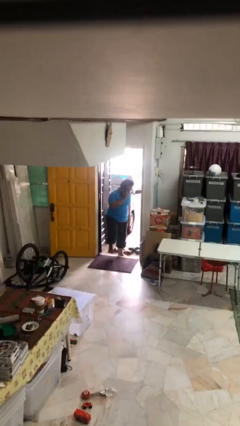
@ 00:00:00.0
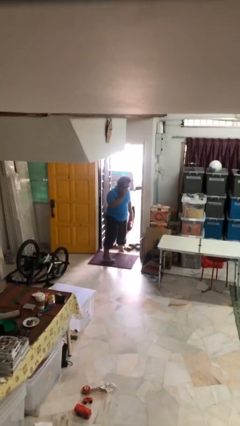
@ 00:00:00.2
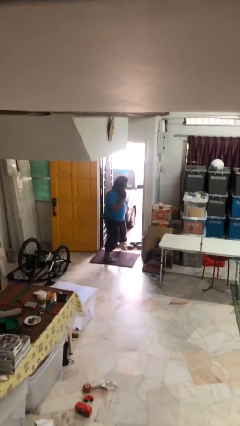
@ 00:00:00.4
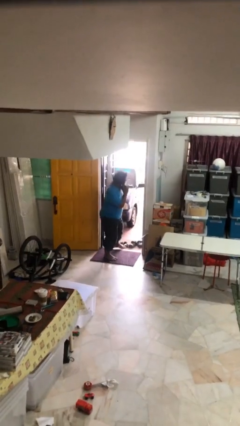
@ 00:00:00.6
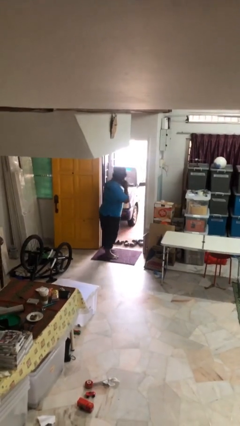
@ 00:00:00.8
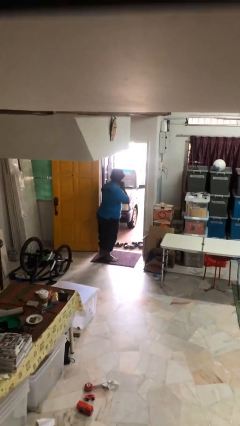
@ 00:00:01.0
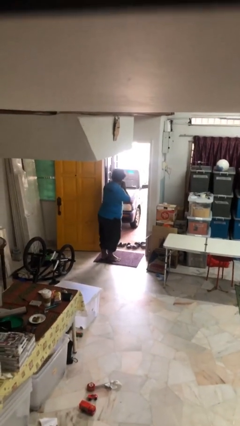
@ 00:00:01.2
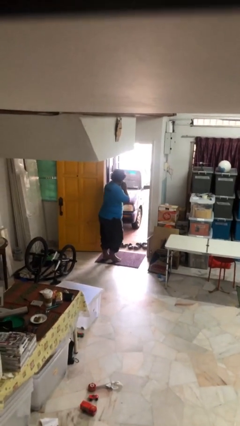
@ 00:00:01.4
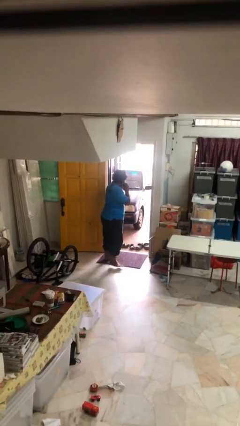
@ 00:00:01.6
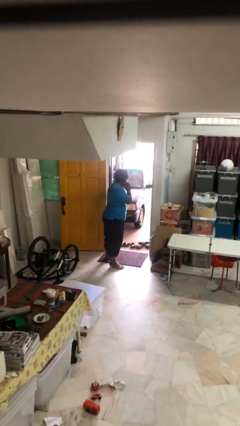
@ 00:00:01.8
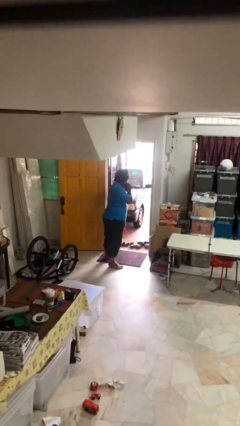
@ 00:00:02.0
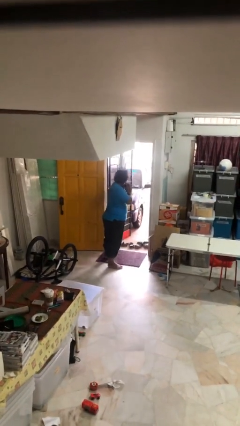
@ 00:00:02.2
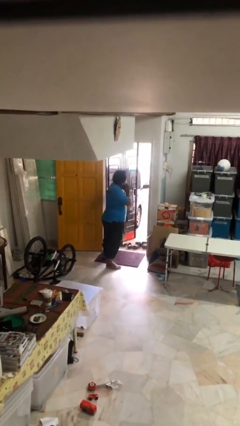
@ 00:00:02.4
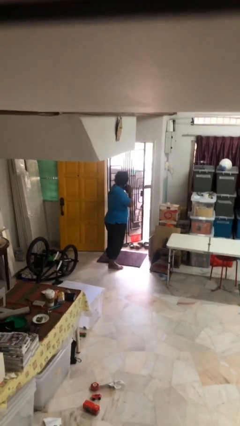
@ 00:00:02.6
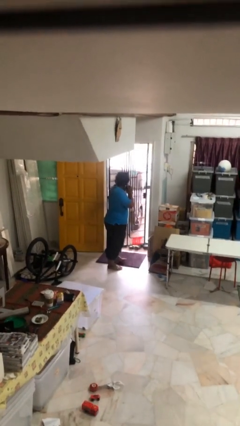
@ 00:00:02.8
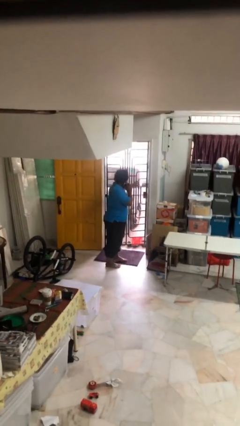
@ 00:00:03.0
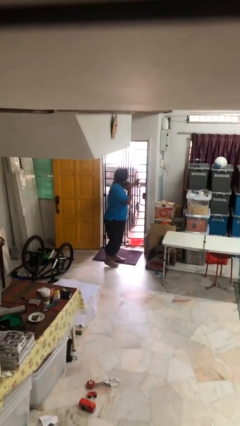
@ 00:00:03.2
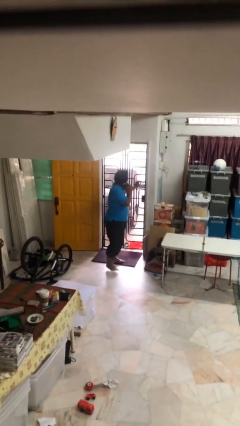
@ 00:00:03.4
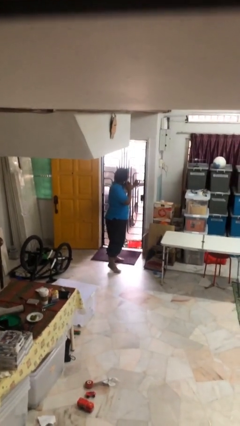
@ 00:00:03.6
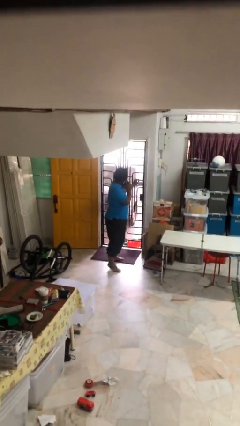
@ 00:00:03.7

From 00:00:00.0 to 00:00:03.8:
person closes facility door

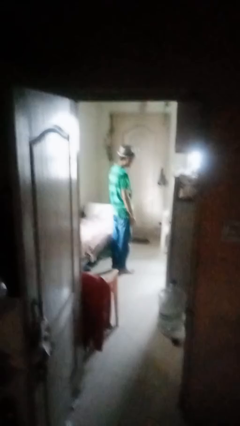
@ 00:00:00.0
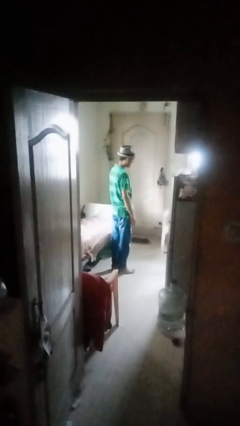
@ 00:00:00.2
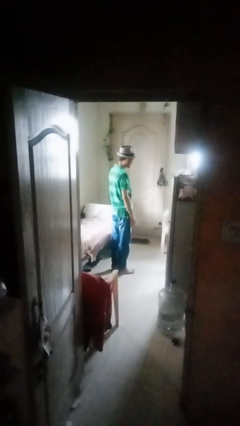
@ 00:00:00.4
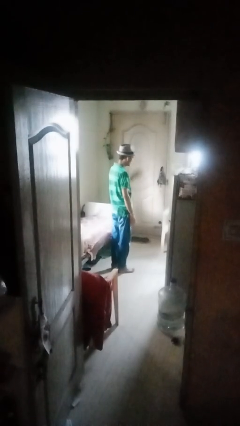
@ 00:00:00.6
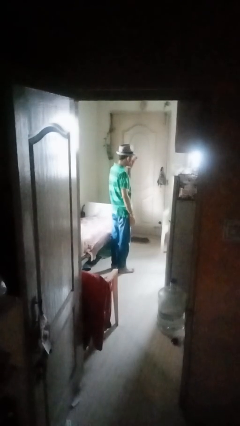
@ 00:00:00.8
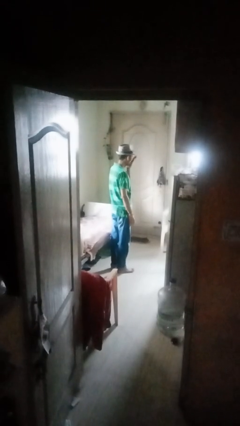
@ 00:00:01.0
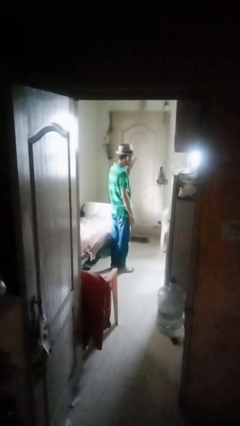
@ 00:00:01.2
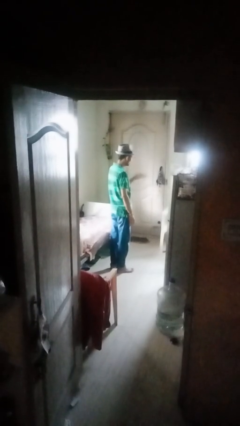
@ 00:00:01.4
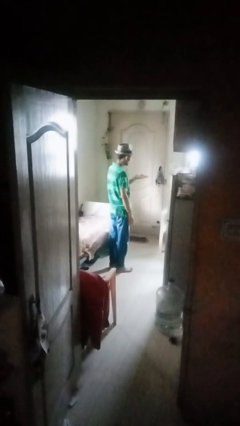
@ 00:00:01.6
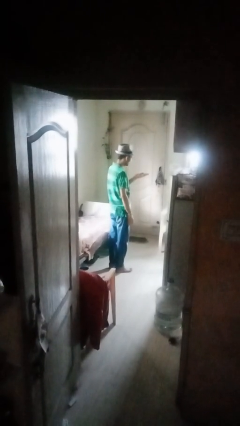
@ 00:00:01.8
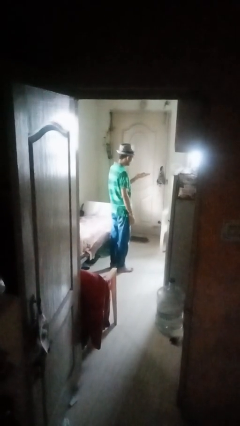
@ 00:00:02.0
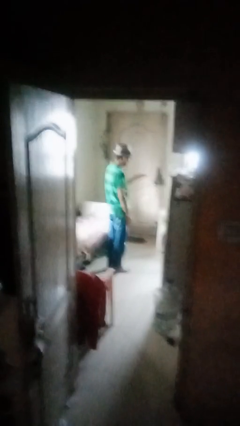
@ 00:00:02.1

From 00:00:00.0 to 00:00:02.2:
person gestures blow kiss

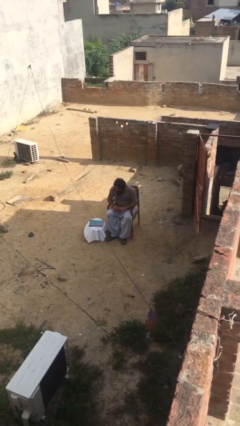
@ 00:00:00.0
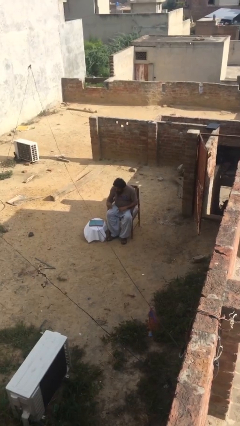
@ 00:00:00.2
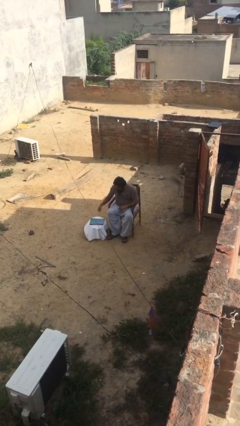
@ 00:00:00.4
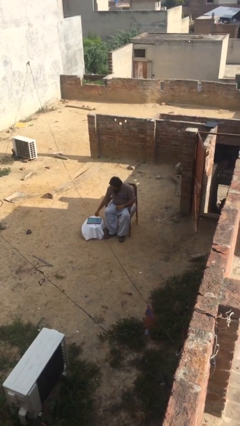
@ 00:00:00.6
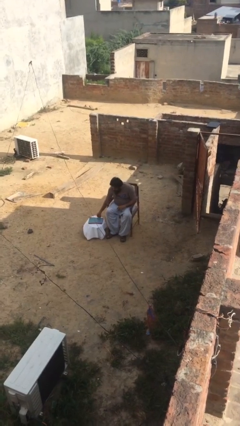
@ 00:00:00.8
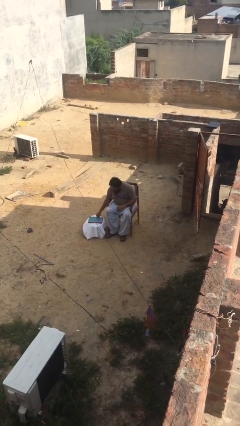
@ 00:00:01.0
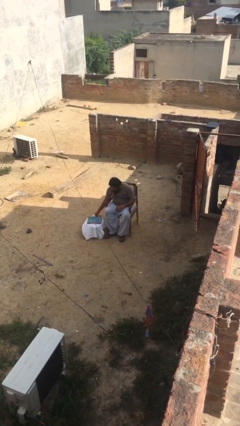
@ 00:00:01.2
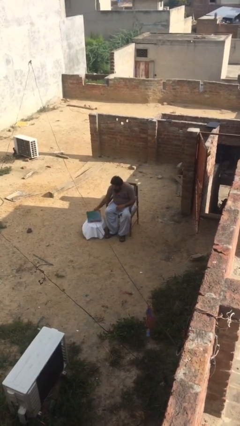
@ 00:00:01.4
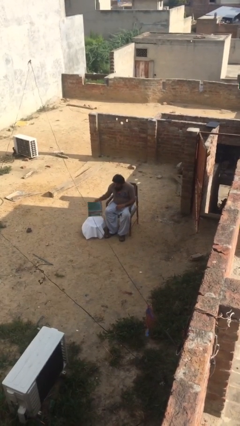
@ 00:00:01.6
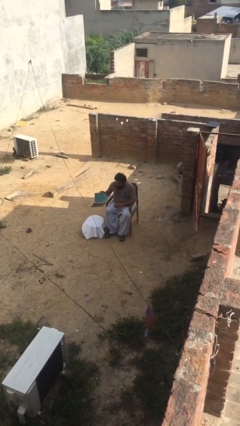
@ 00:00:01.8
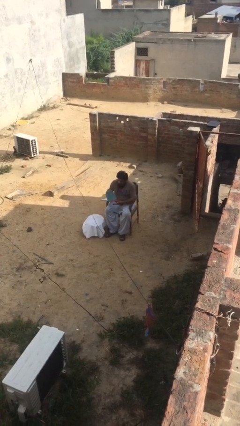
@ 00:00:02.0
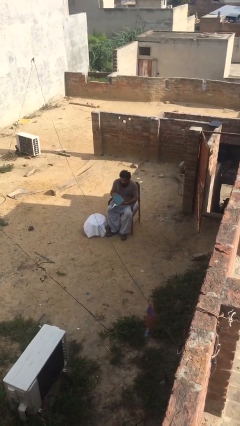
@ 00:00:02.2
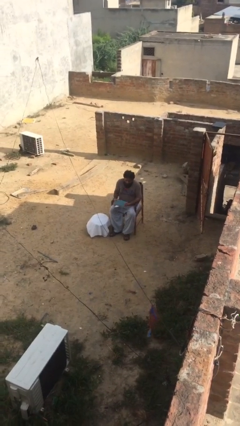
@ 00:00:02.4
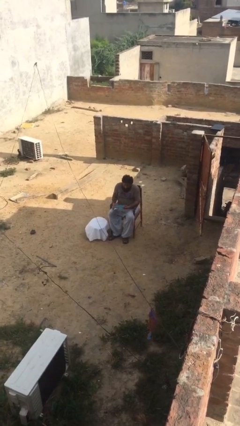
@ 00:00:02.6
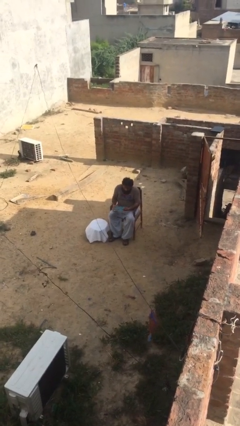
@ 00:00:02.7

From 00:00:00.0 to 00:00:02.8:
person picks up object from table

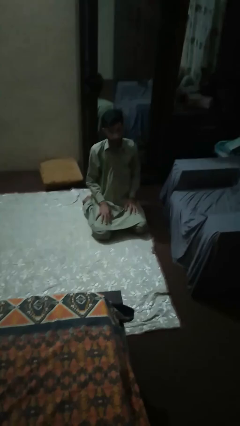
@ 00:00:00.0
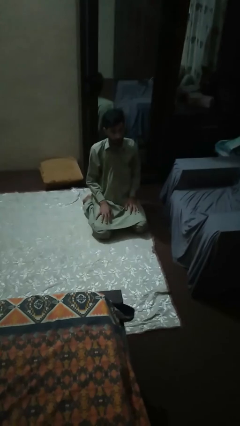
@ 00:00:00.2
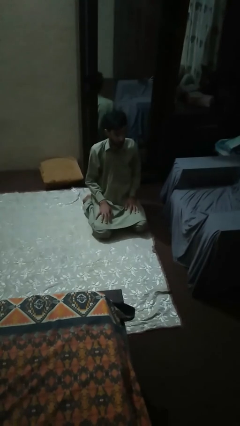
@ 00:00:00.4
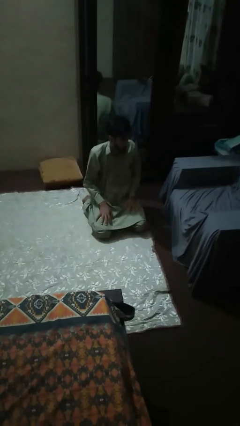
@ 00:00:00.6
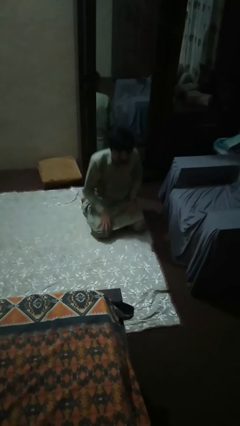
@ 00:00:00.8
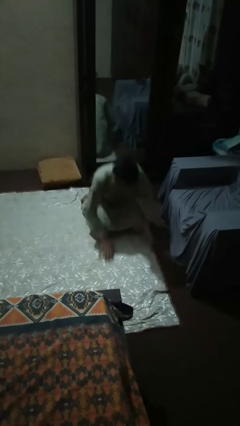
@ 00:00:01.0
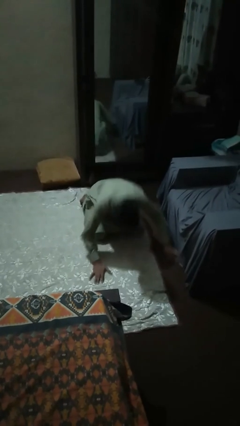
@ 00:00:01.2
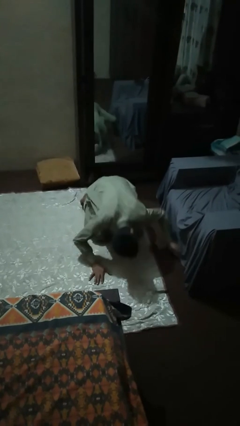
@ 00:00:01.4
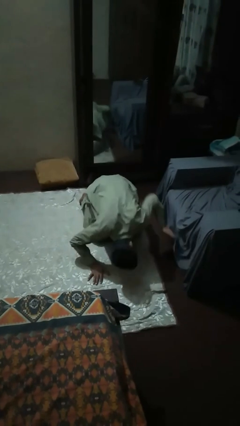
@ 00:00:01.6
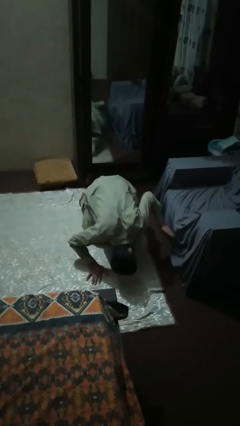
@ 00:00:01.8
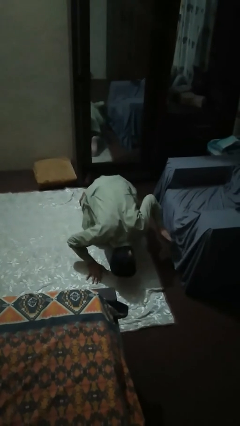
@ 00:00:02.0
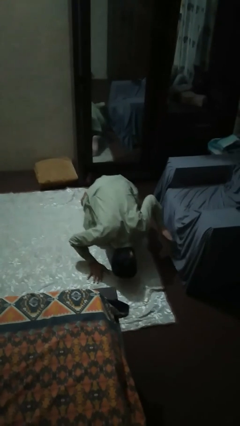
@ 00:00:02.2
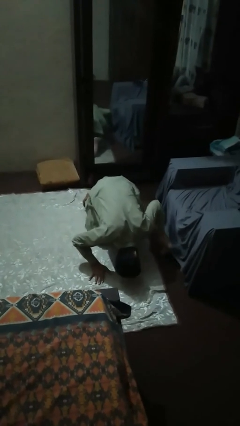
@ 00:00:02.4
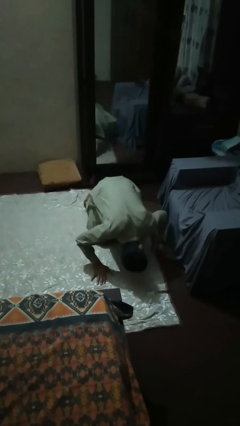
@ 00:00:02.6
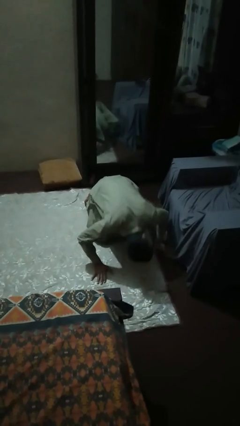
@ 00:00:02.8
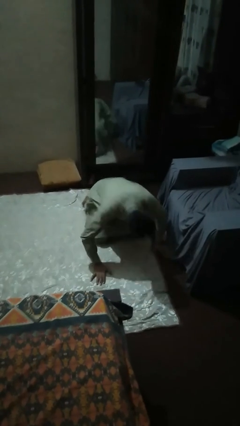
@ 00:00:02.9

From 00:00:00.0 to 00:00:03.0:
person searches under couch

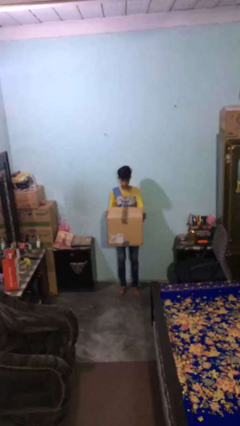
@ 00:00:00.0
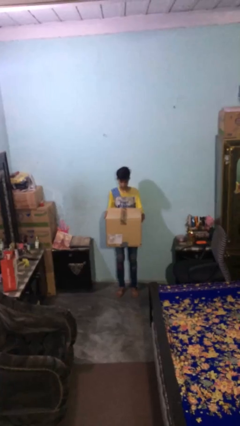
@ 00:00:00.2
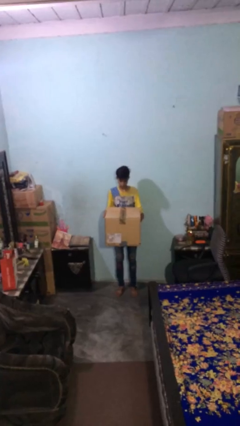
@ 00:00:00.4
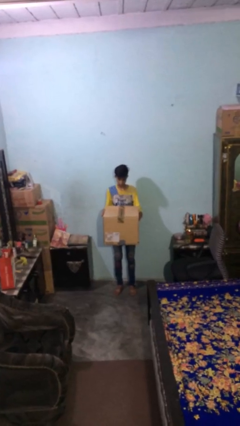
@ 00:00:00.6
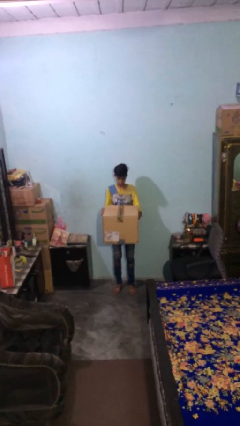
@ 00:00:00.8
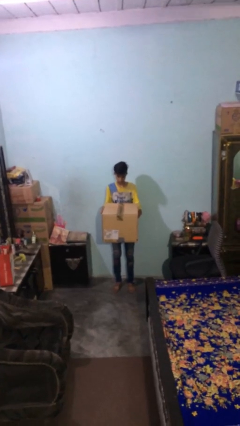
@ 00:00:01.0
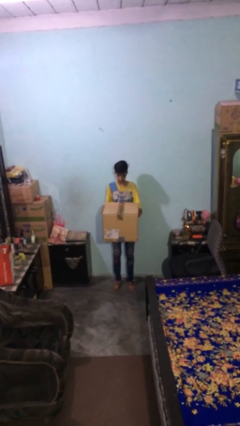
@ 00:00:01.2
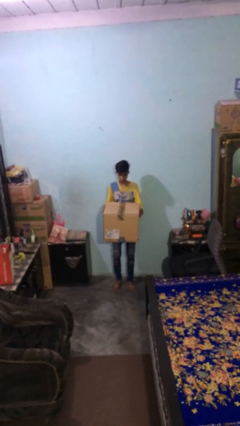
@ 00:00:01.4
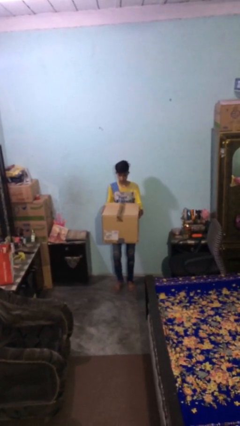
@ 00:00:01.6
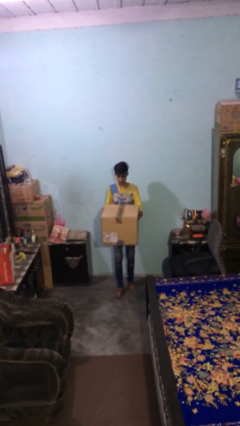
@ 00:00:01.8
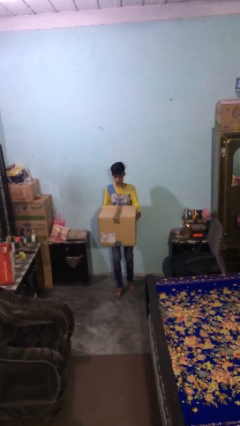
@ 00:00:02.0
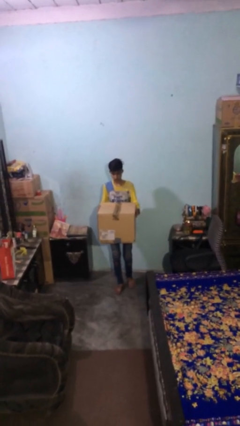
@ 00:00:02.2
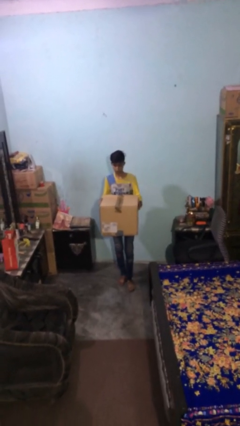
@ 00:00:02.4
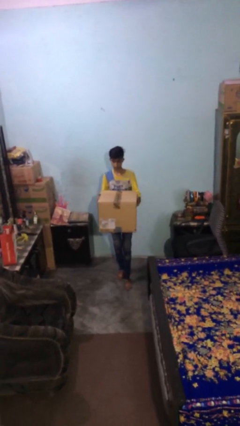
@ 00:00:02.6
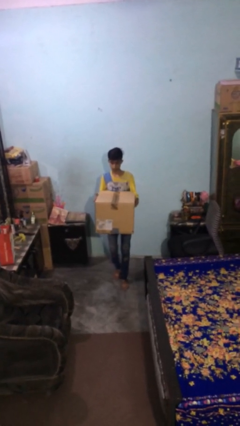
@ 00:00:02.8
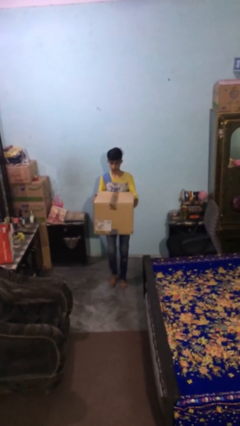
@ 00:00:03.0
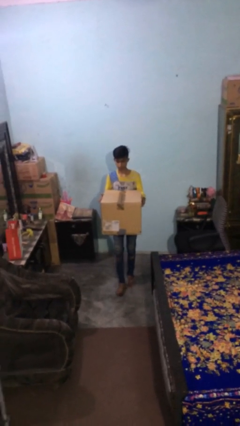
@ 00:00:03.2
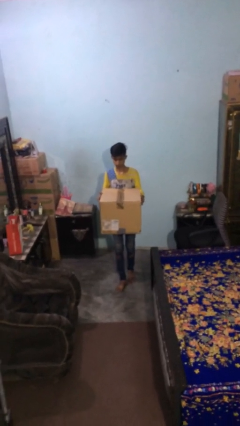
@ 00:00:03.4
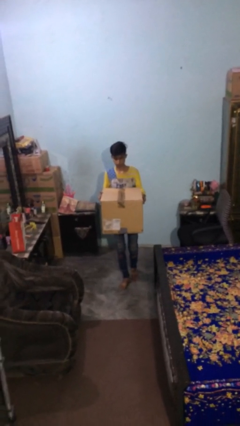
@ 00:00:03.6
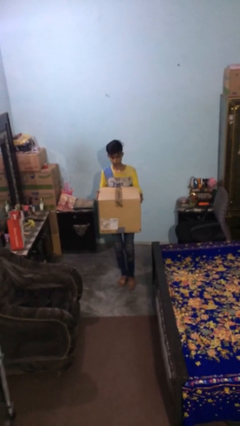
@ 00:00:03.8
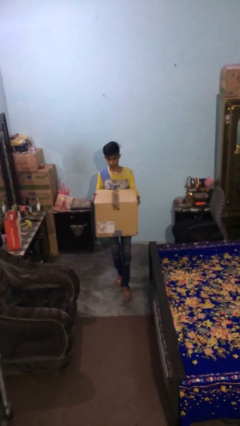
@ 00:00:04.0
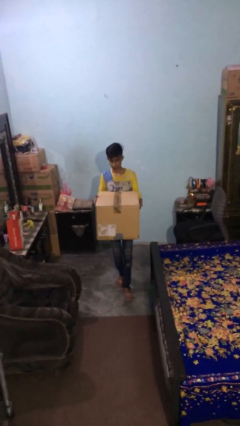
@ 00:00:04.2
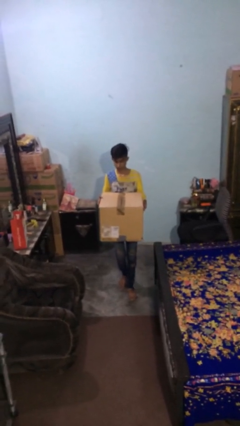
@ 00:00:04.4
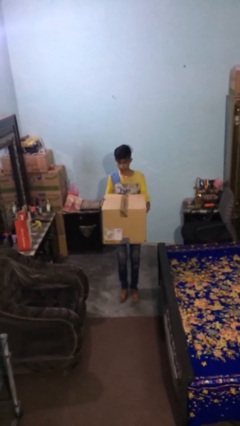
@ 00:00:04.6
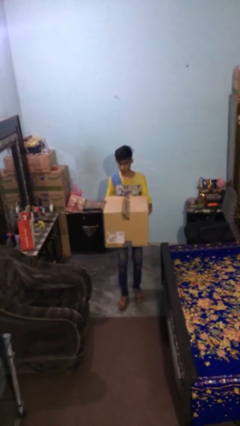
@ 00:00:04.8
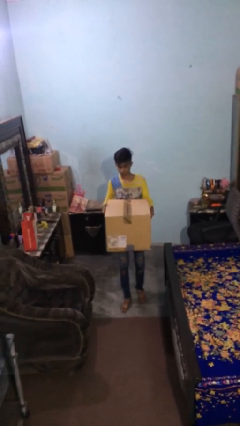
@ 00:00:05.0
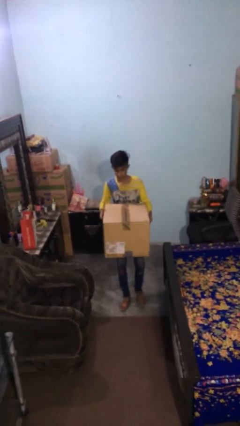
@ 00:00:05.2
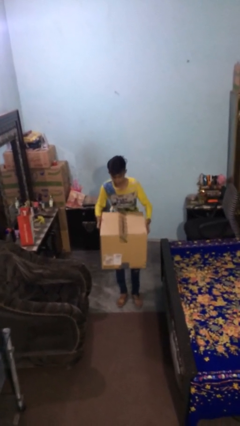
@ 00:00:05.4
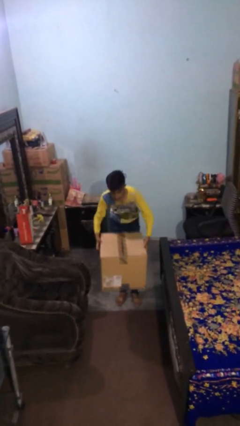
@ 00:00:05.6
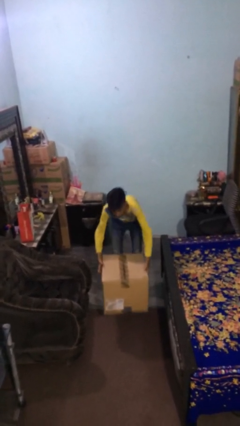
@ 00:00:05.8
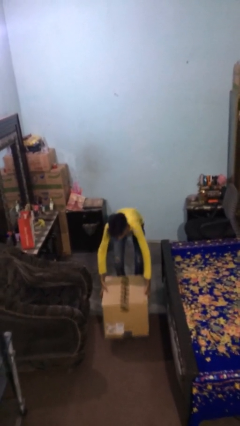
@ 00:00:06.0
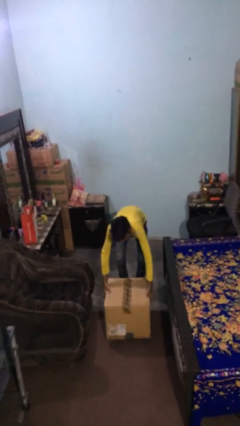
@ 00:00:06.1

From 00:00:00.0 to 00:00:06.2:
person carries heavy object
